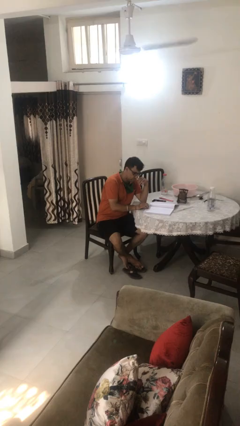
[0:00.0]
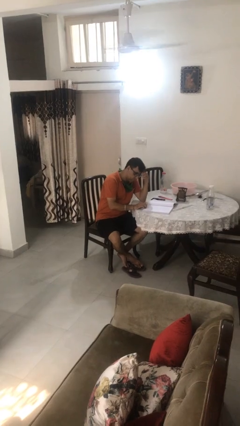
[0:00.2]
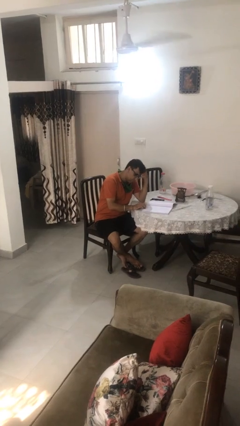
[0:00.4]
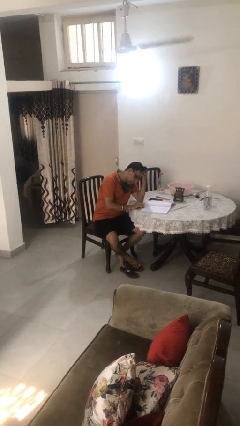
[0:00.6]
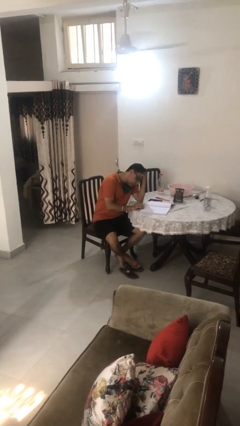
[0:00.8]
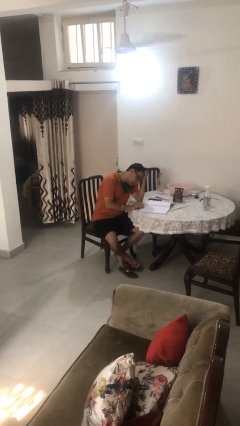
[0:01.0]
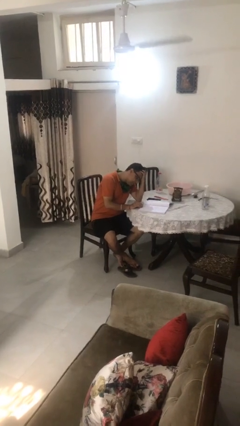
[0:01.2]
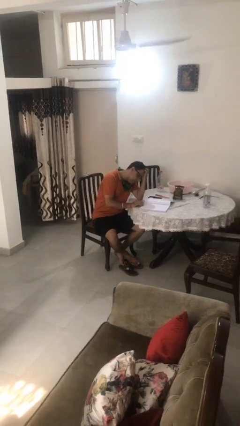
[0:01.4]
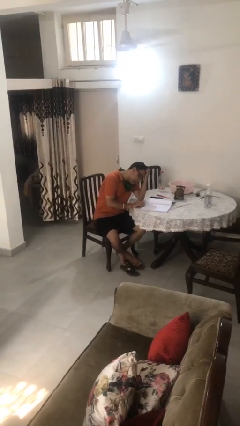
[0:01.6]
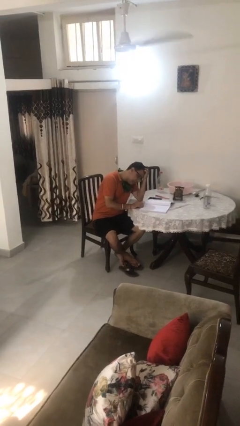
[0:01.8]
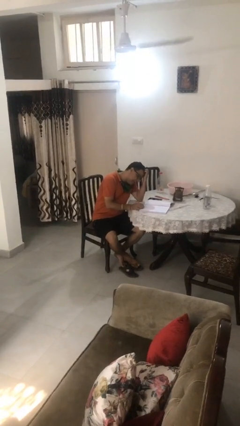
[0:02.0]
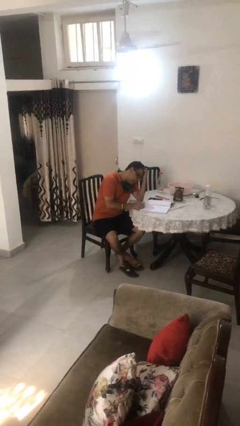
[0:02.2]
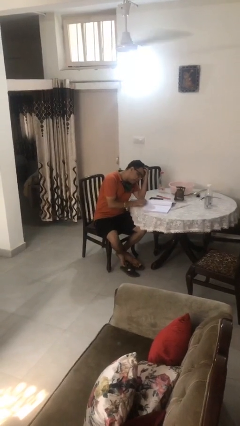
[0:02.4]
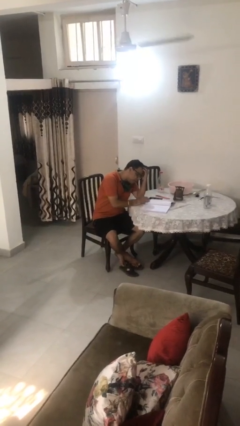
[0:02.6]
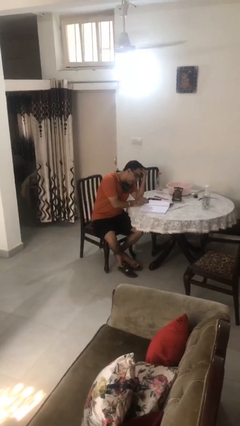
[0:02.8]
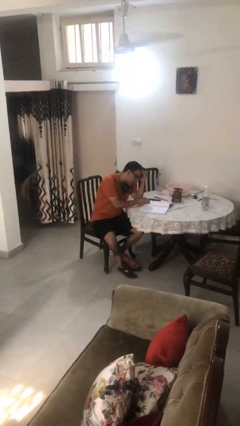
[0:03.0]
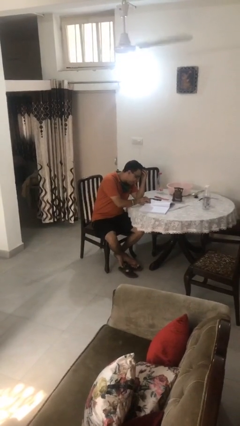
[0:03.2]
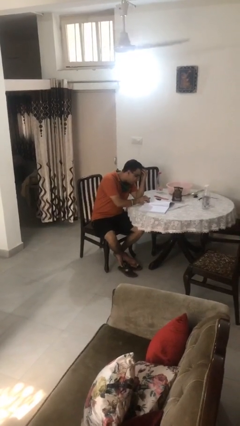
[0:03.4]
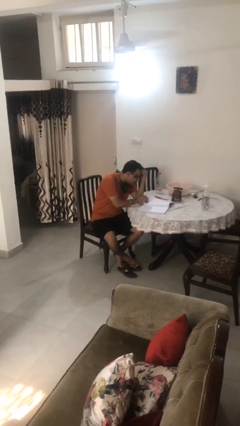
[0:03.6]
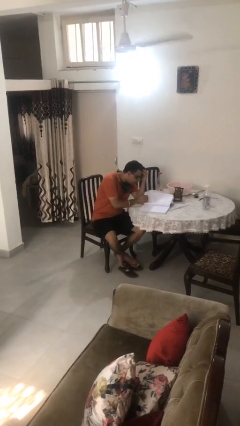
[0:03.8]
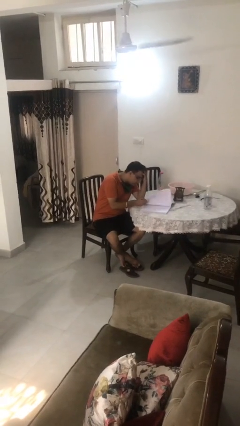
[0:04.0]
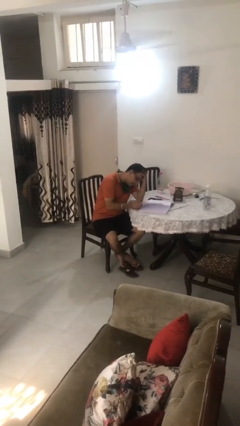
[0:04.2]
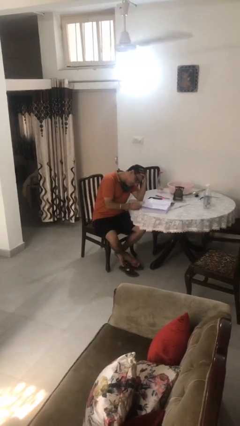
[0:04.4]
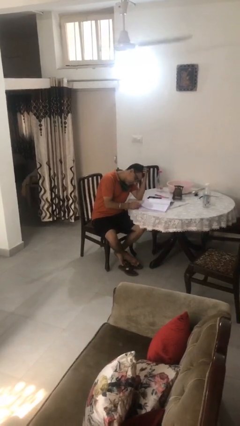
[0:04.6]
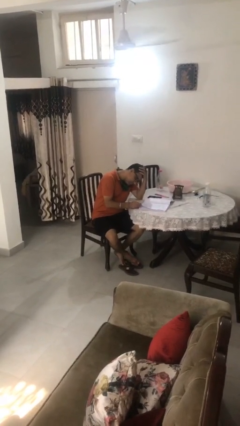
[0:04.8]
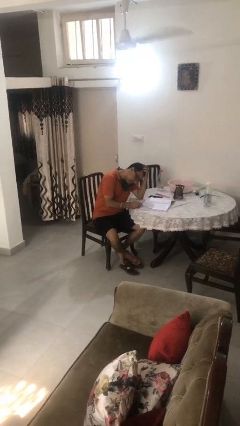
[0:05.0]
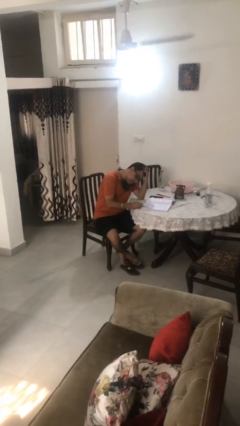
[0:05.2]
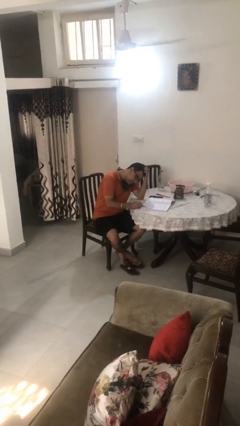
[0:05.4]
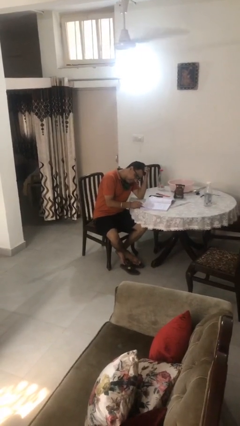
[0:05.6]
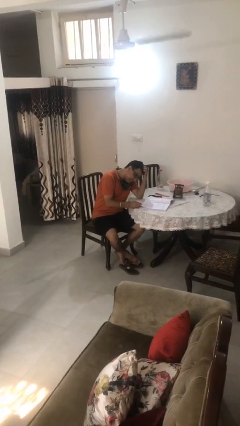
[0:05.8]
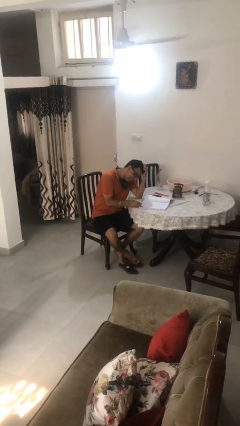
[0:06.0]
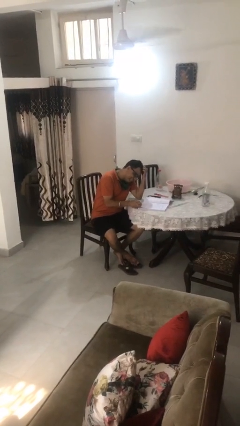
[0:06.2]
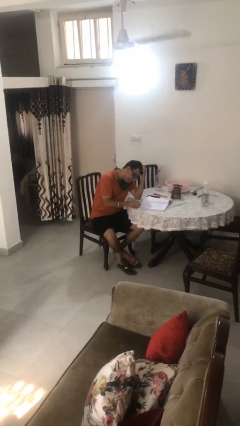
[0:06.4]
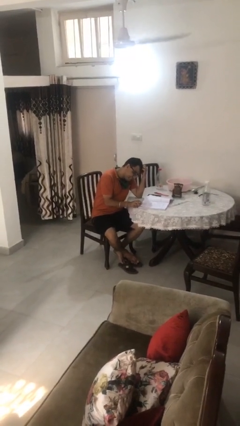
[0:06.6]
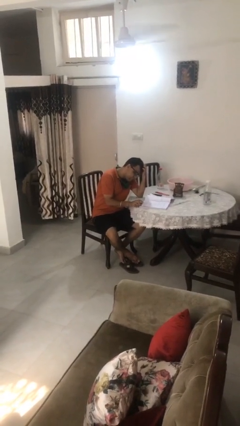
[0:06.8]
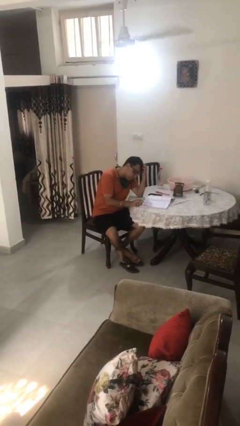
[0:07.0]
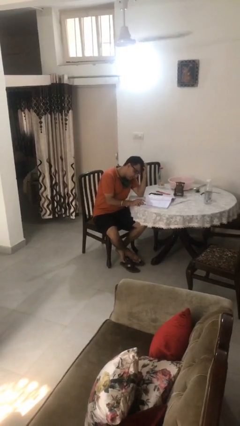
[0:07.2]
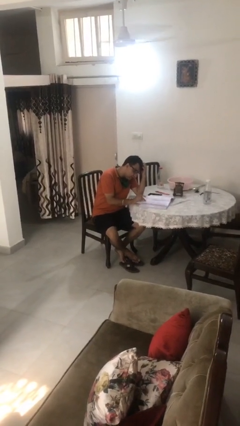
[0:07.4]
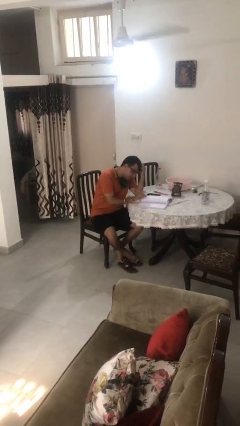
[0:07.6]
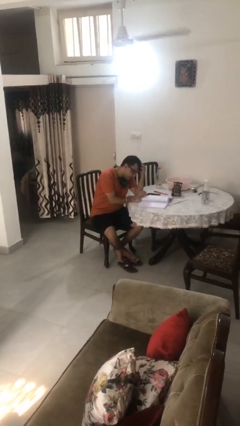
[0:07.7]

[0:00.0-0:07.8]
person reads document

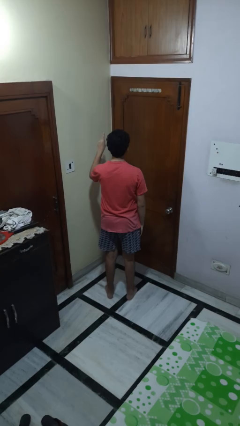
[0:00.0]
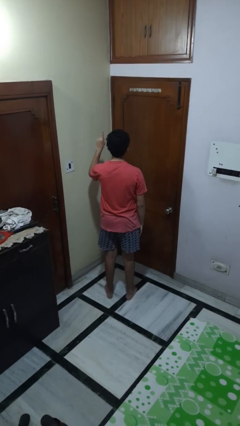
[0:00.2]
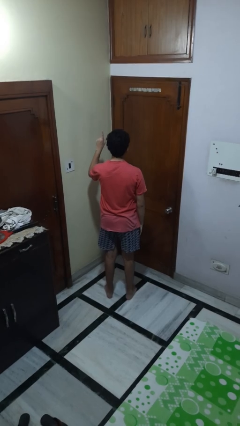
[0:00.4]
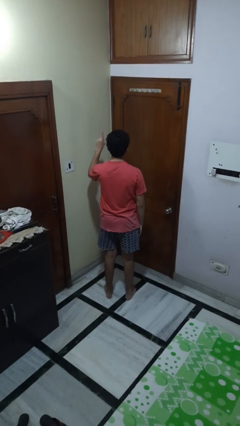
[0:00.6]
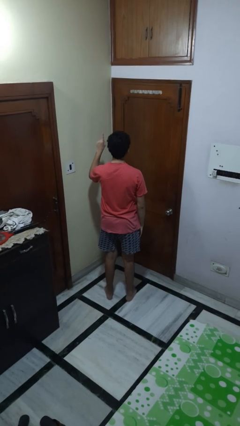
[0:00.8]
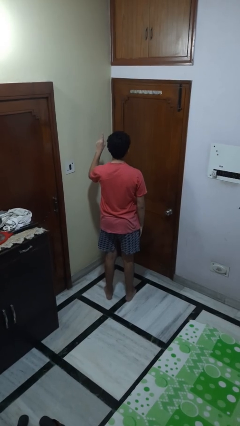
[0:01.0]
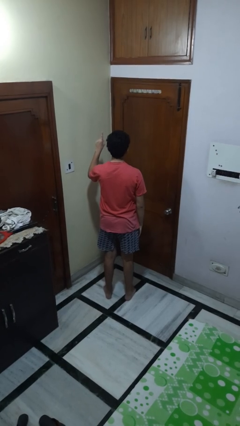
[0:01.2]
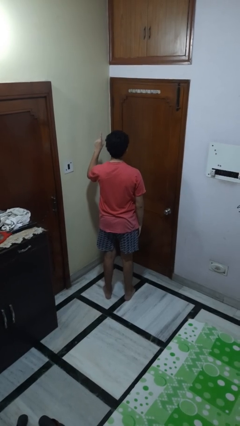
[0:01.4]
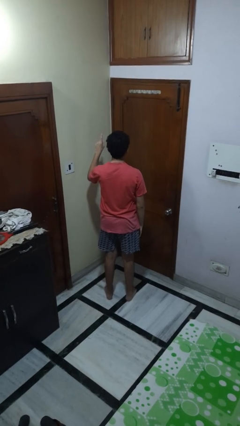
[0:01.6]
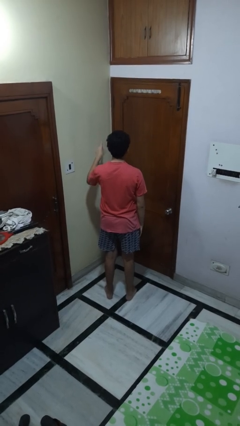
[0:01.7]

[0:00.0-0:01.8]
person gestures number one

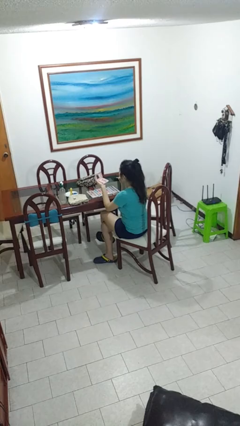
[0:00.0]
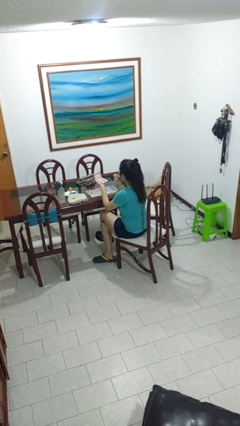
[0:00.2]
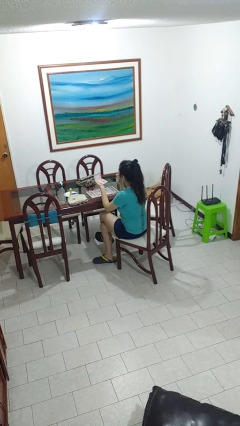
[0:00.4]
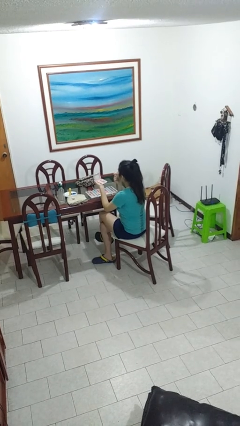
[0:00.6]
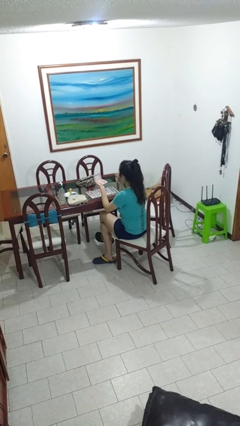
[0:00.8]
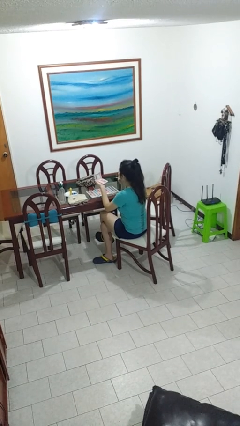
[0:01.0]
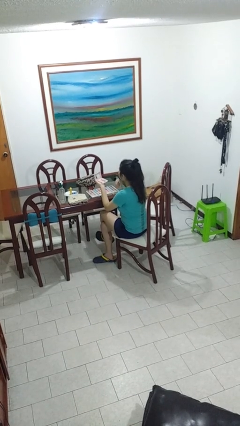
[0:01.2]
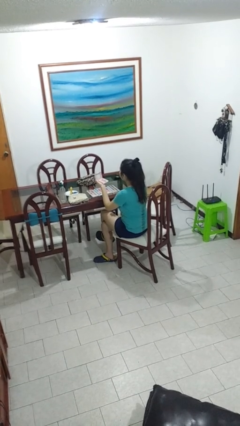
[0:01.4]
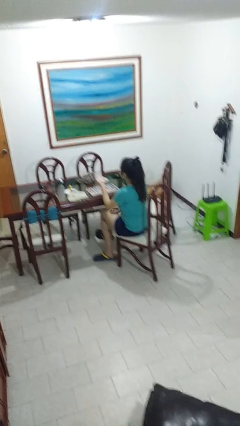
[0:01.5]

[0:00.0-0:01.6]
person applies lip makeup

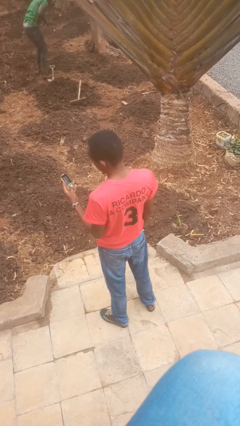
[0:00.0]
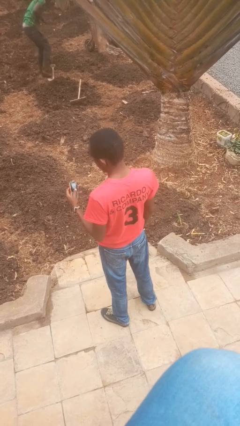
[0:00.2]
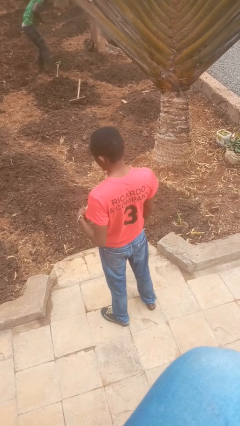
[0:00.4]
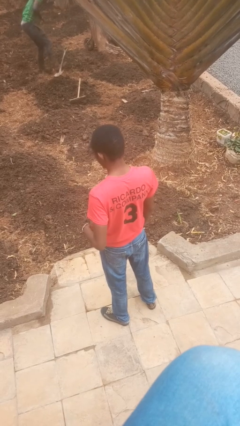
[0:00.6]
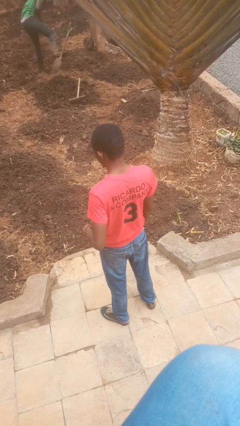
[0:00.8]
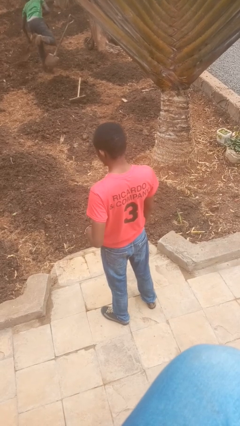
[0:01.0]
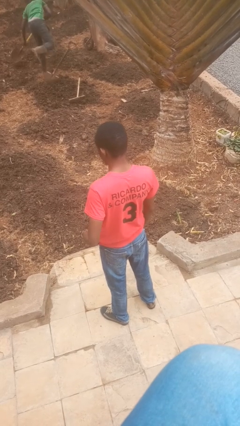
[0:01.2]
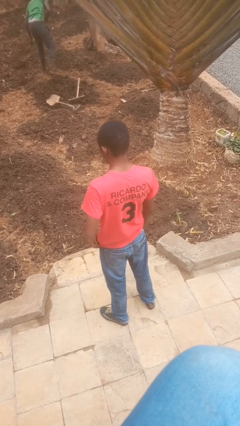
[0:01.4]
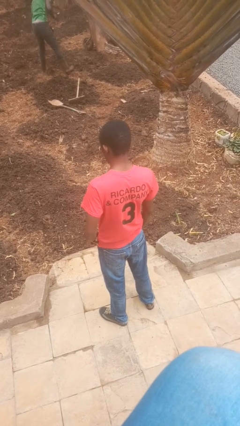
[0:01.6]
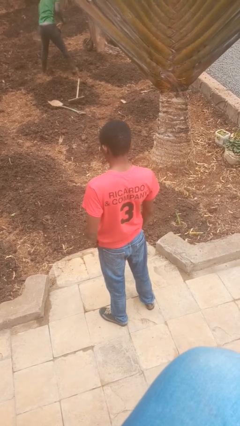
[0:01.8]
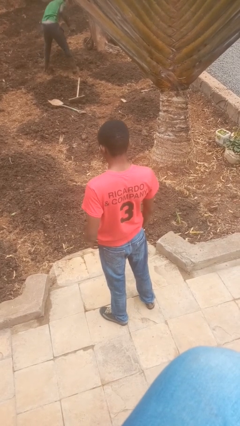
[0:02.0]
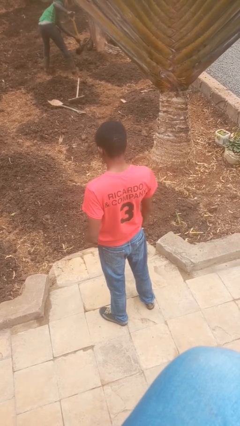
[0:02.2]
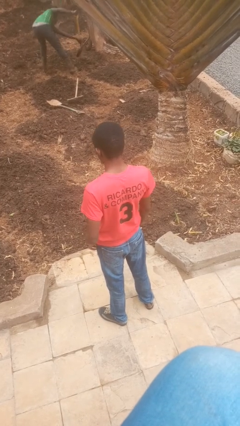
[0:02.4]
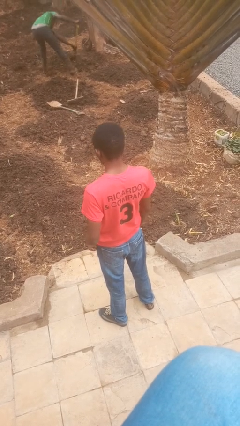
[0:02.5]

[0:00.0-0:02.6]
person puts phone into pocket

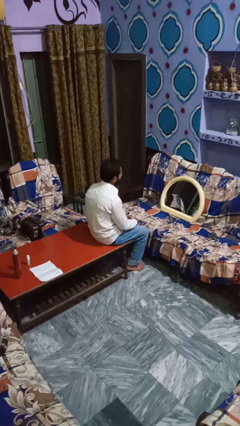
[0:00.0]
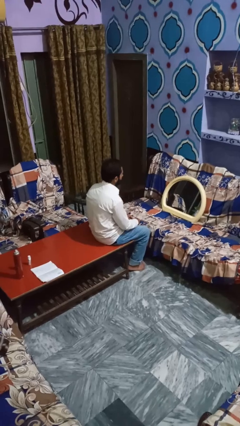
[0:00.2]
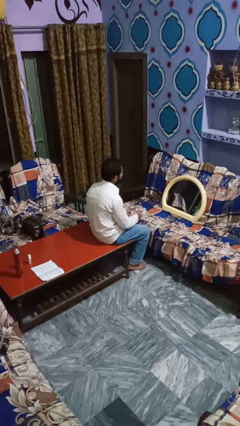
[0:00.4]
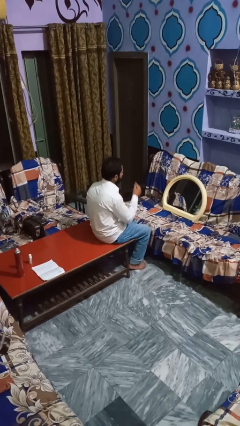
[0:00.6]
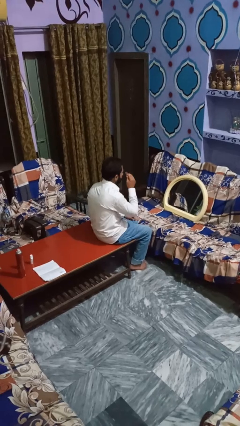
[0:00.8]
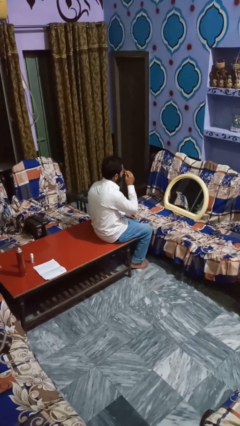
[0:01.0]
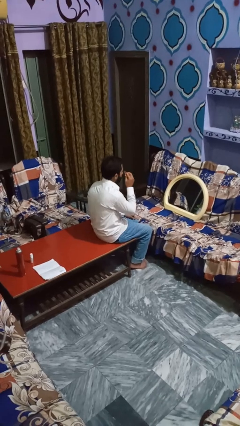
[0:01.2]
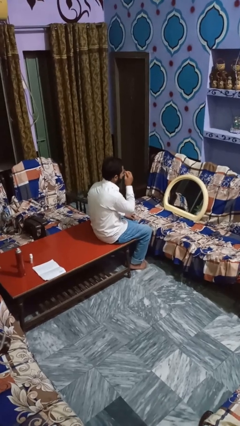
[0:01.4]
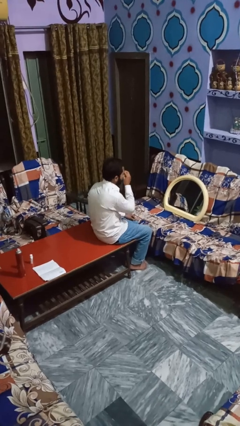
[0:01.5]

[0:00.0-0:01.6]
person applies eye makeup

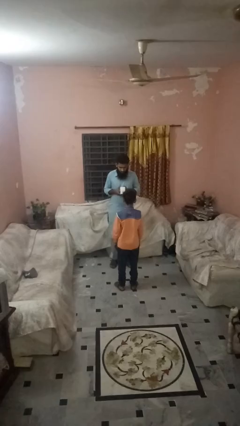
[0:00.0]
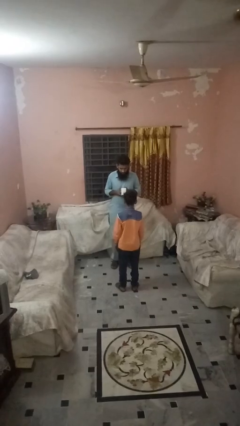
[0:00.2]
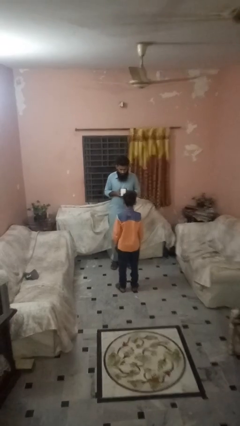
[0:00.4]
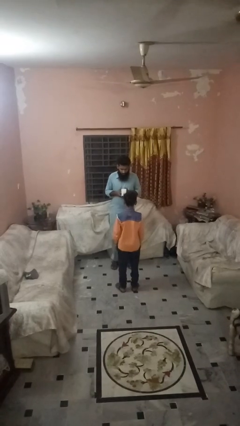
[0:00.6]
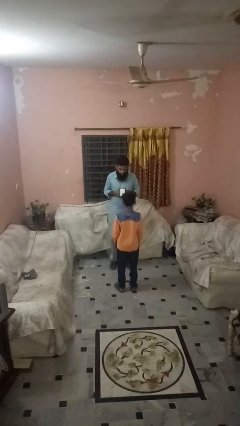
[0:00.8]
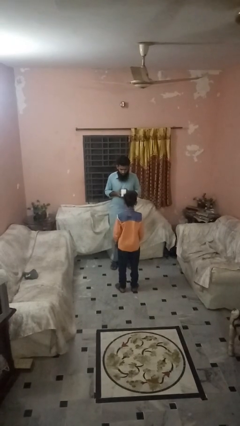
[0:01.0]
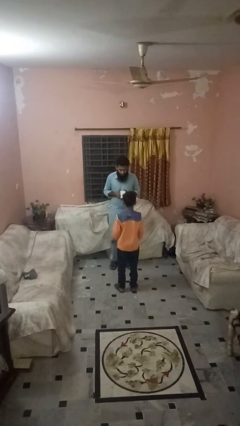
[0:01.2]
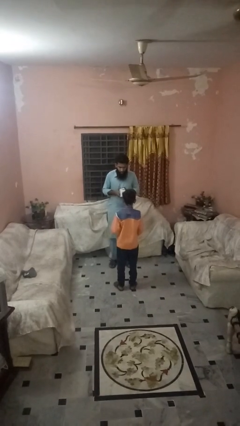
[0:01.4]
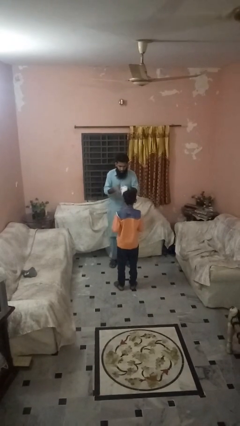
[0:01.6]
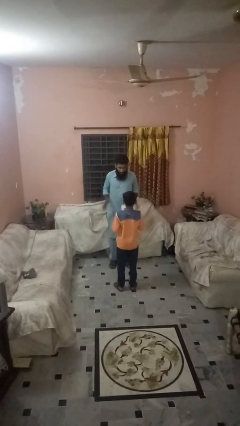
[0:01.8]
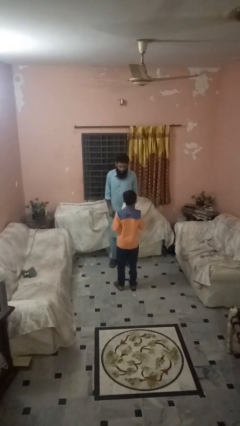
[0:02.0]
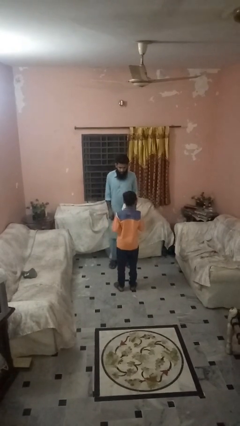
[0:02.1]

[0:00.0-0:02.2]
person throws object to person
